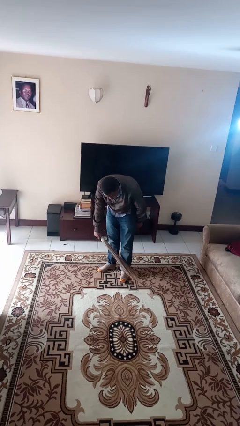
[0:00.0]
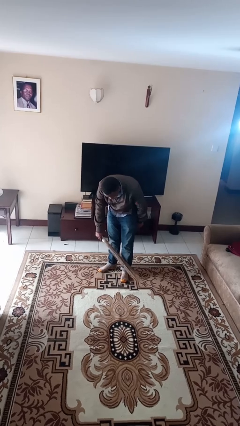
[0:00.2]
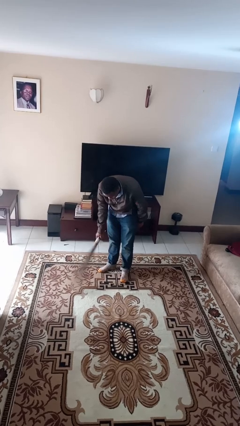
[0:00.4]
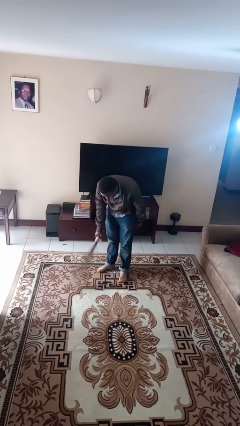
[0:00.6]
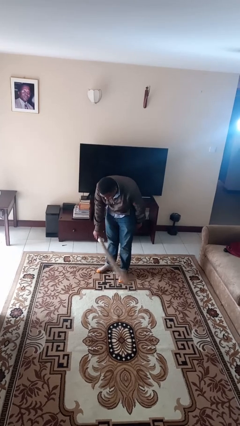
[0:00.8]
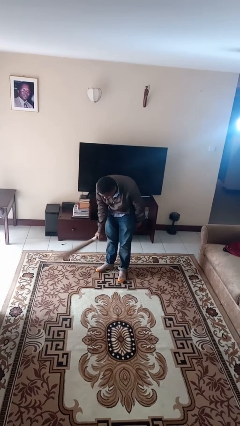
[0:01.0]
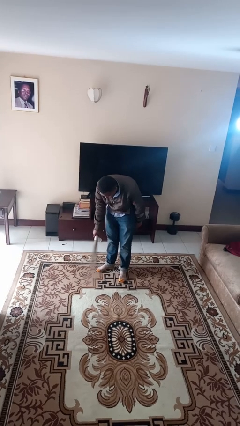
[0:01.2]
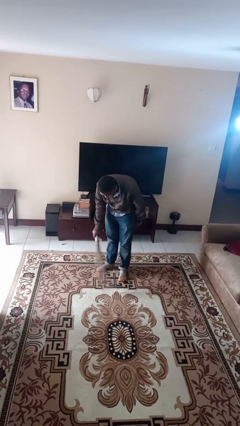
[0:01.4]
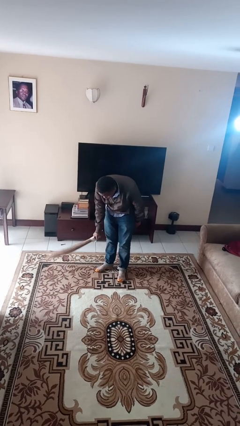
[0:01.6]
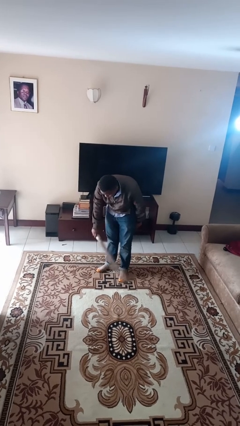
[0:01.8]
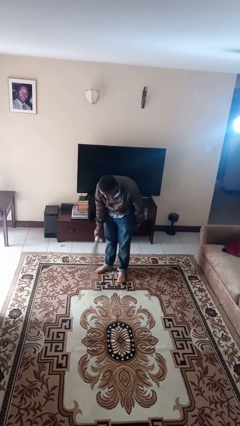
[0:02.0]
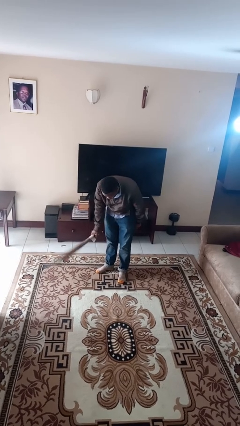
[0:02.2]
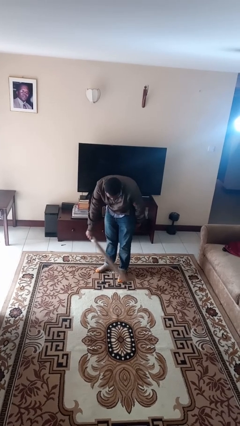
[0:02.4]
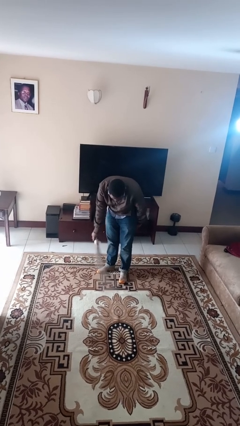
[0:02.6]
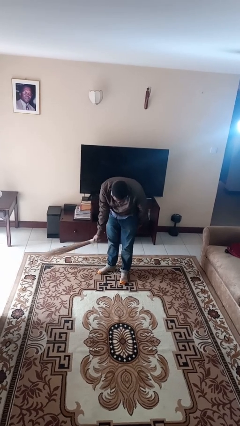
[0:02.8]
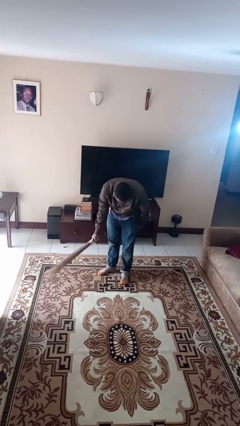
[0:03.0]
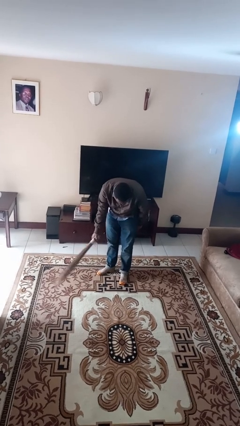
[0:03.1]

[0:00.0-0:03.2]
person sweeps floor

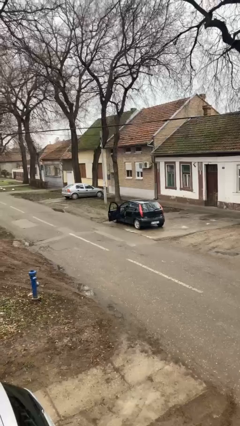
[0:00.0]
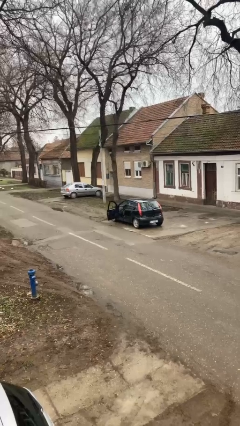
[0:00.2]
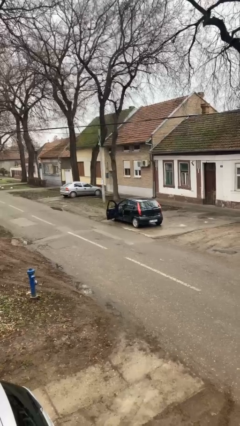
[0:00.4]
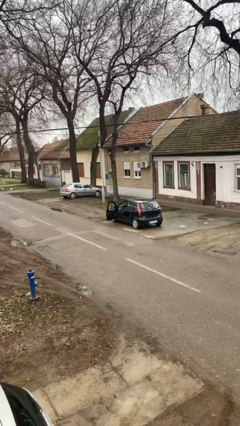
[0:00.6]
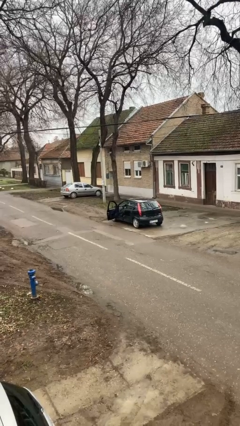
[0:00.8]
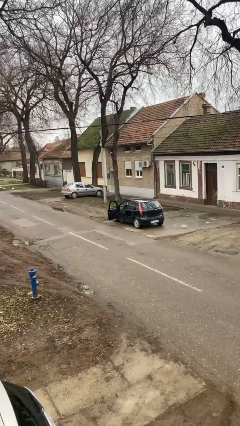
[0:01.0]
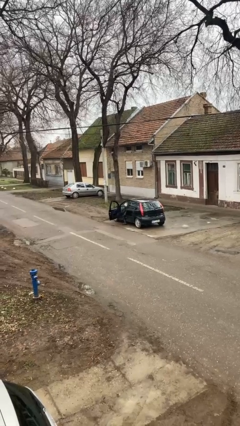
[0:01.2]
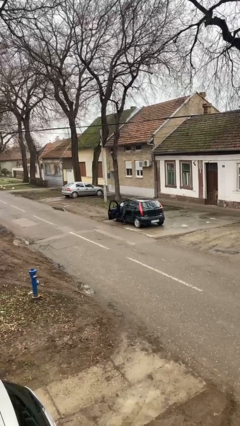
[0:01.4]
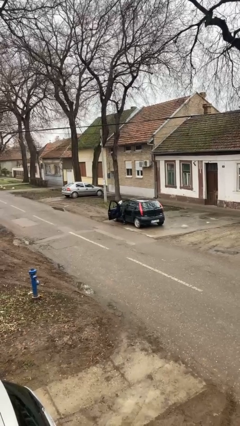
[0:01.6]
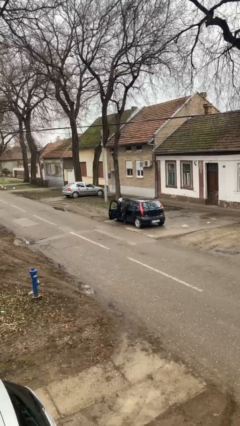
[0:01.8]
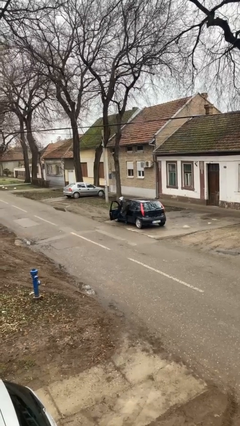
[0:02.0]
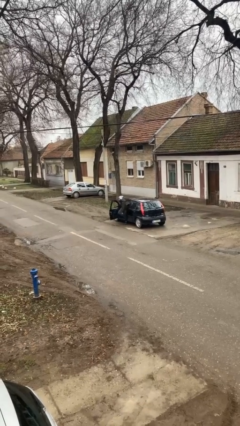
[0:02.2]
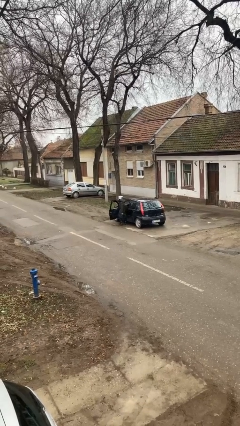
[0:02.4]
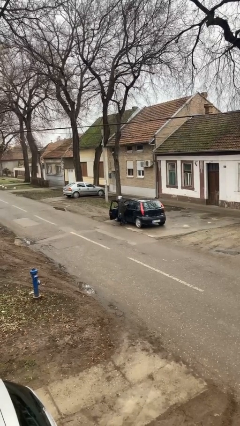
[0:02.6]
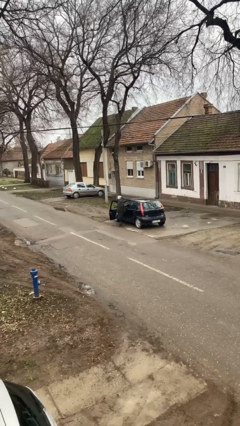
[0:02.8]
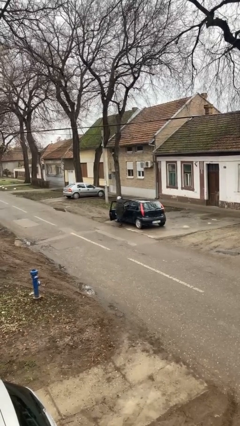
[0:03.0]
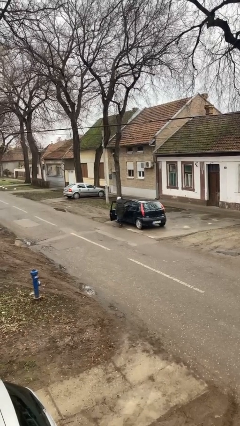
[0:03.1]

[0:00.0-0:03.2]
person exits car

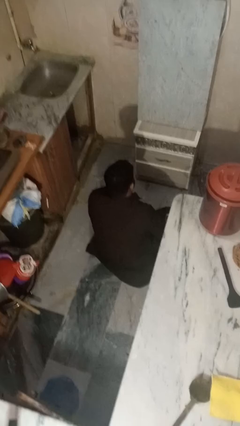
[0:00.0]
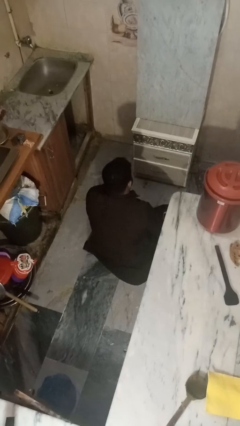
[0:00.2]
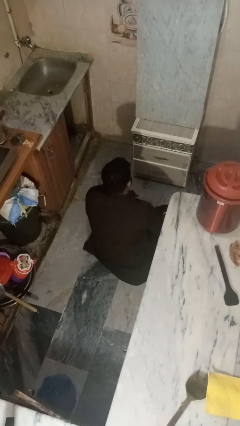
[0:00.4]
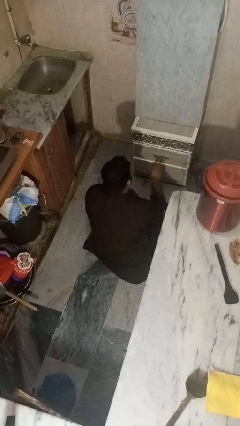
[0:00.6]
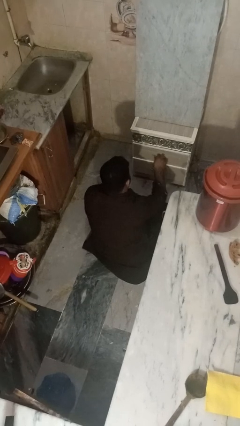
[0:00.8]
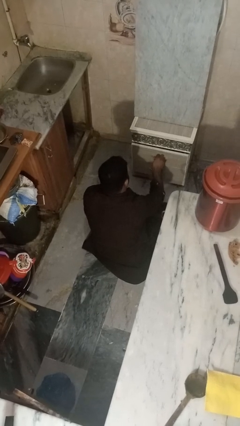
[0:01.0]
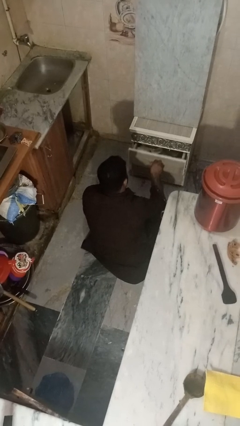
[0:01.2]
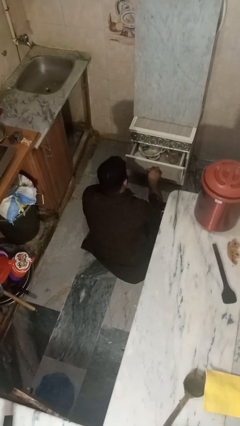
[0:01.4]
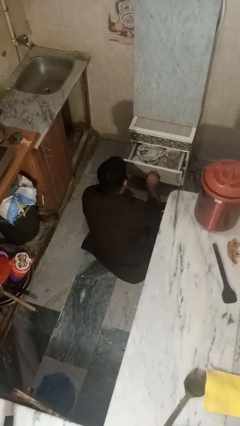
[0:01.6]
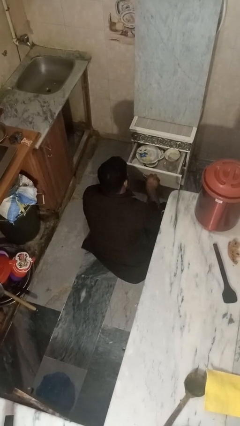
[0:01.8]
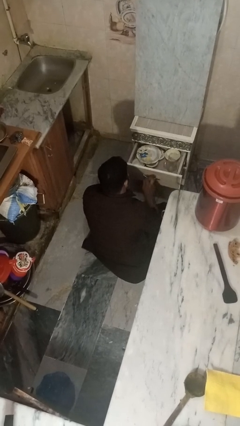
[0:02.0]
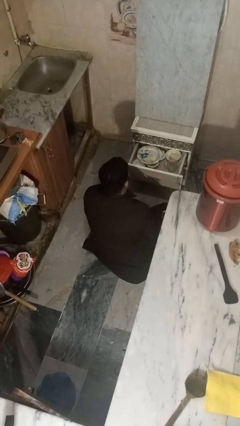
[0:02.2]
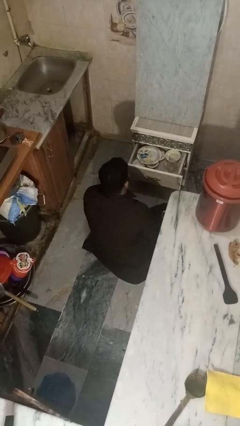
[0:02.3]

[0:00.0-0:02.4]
person opens kitchen drawer

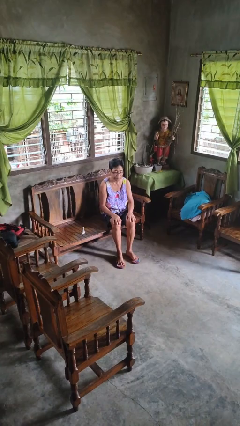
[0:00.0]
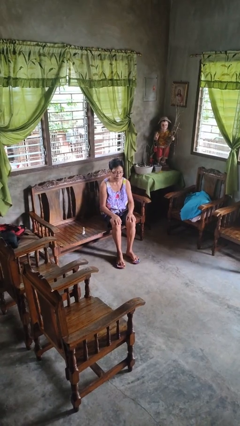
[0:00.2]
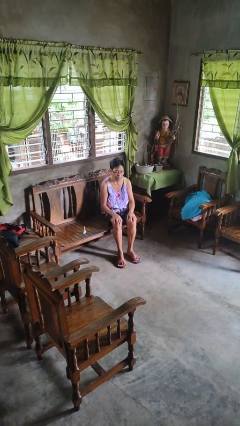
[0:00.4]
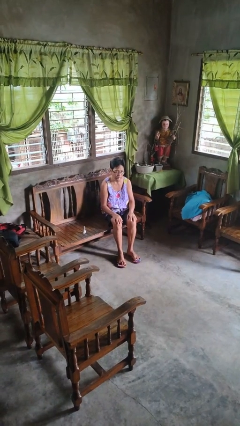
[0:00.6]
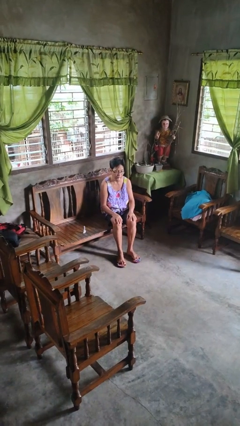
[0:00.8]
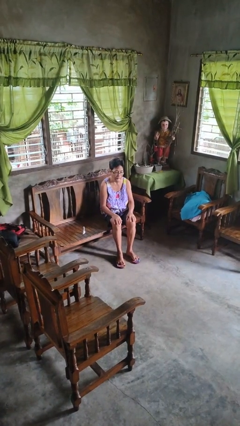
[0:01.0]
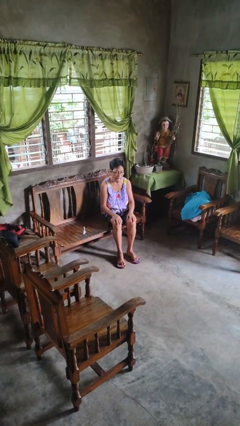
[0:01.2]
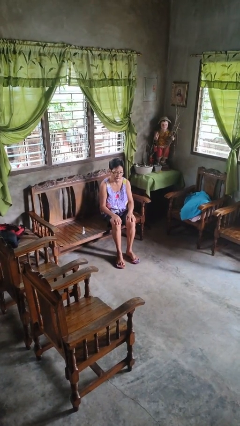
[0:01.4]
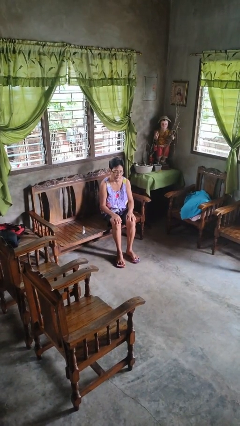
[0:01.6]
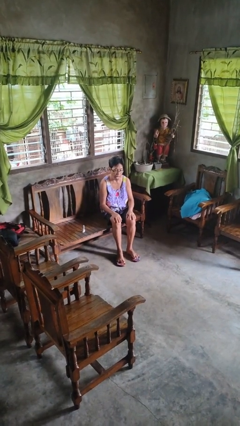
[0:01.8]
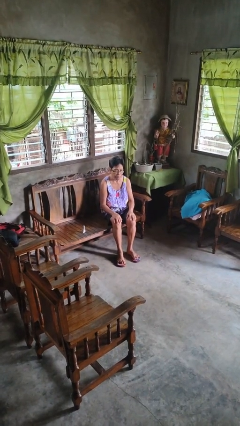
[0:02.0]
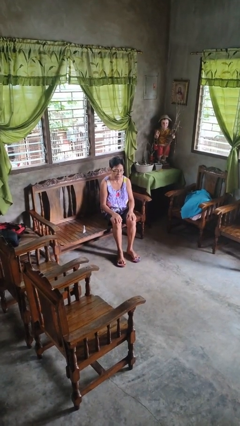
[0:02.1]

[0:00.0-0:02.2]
person sticks out tongue

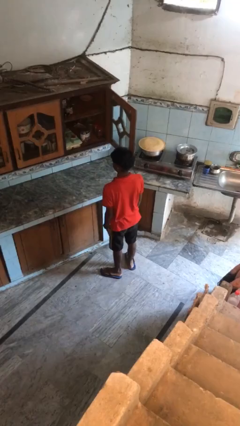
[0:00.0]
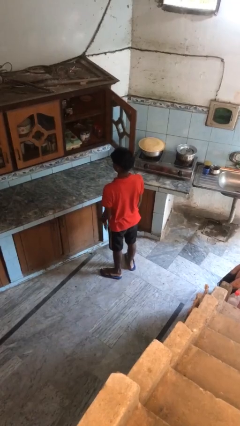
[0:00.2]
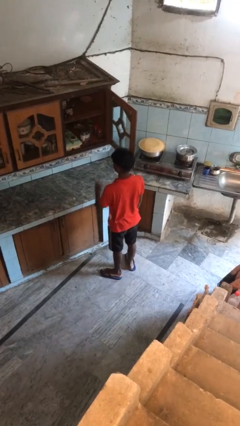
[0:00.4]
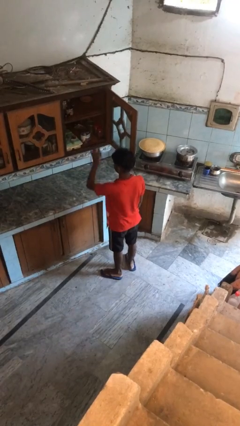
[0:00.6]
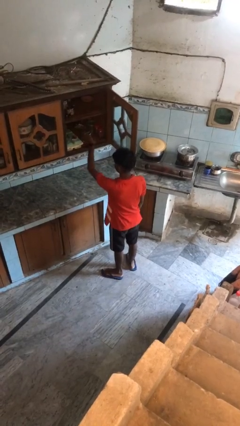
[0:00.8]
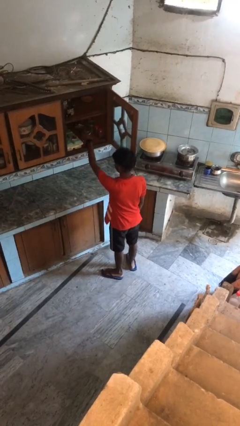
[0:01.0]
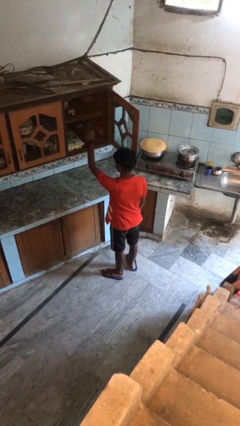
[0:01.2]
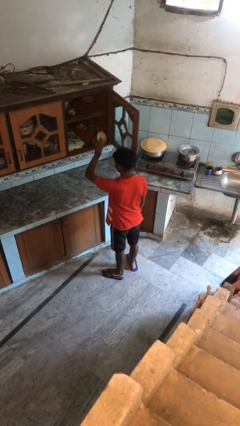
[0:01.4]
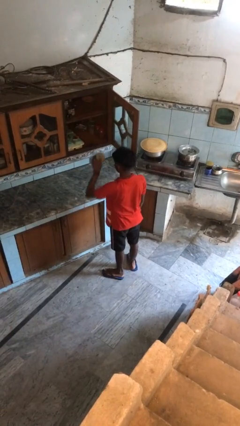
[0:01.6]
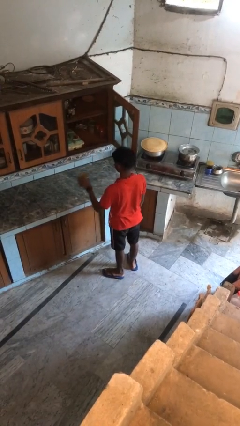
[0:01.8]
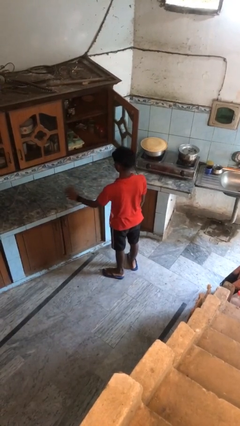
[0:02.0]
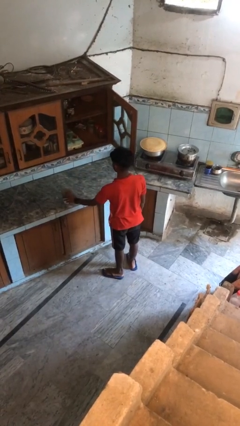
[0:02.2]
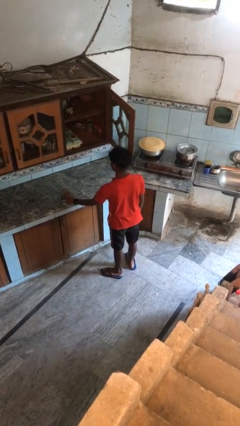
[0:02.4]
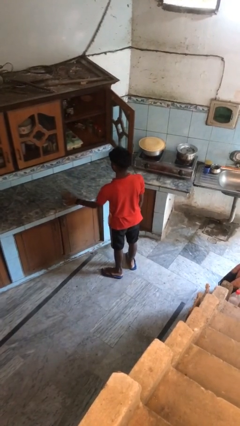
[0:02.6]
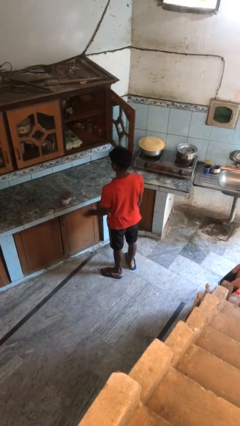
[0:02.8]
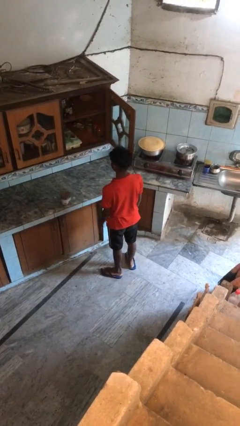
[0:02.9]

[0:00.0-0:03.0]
person takes object from cabinet

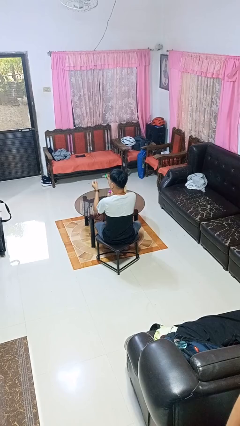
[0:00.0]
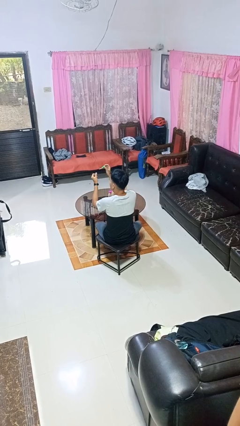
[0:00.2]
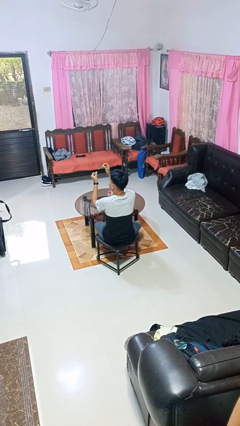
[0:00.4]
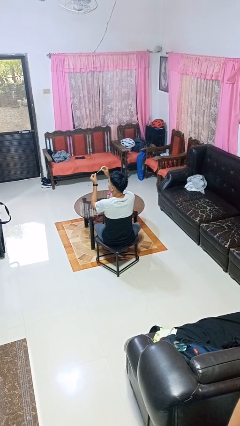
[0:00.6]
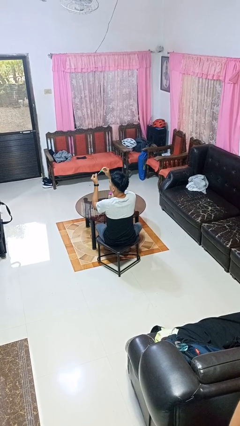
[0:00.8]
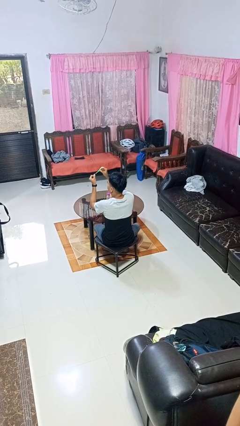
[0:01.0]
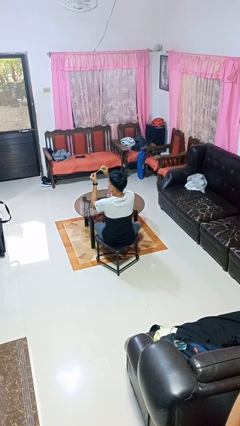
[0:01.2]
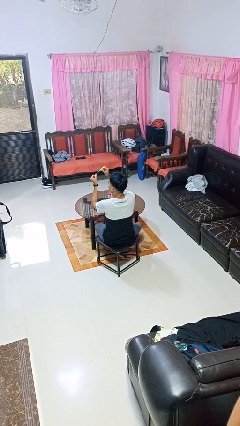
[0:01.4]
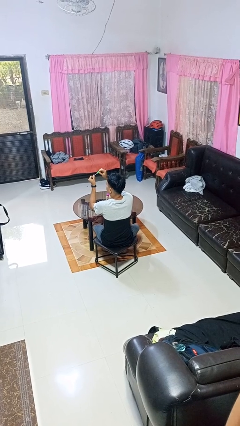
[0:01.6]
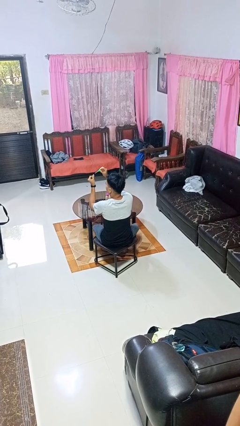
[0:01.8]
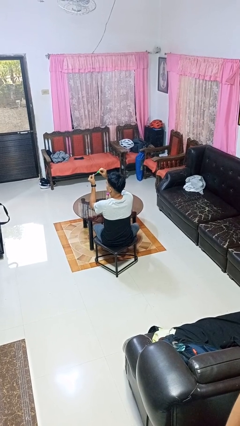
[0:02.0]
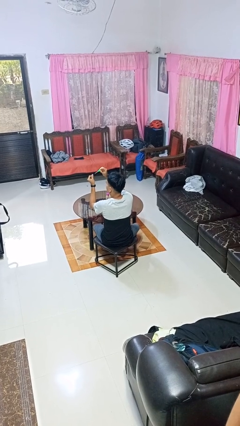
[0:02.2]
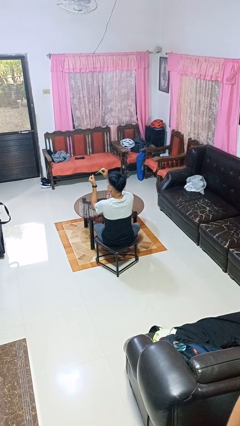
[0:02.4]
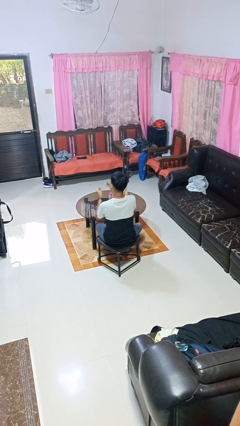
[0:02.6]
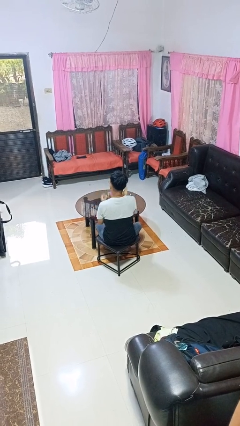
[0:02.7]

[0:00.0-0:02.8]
person paints fingernails
